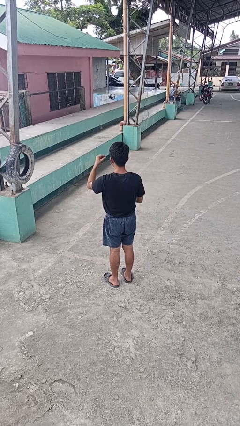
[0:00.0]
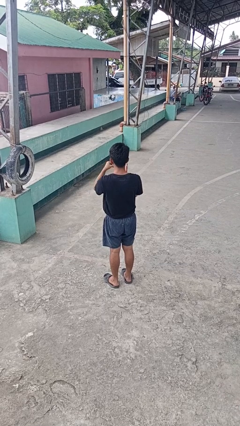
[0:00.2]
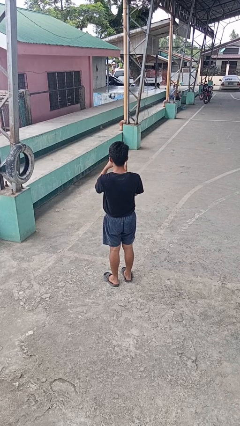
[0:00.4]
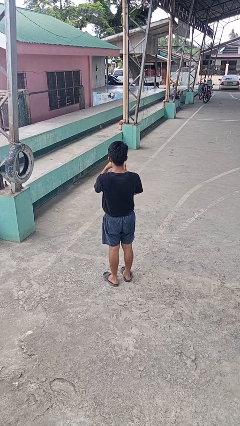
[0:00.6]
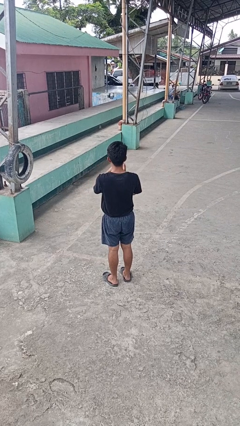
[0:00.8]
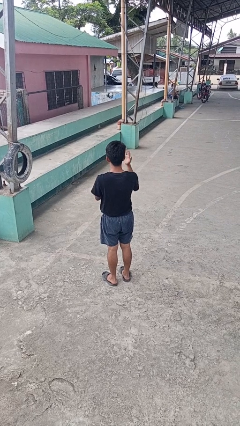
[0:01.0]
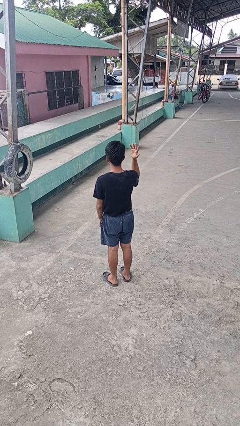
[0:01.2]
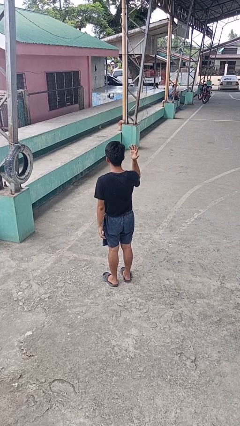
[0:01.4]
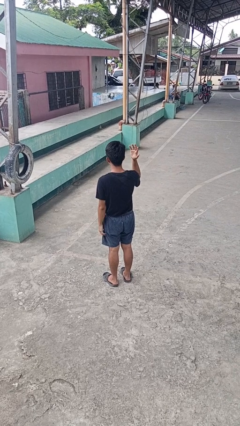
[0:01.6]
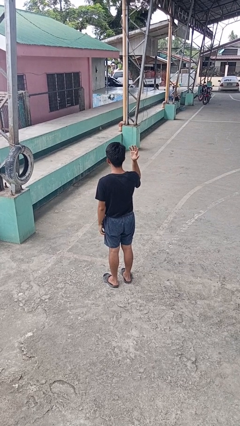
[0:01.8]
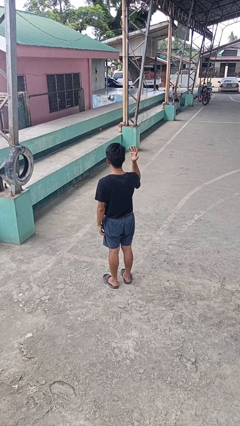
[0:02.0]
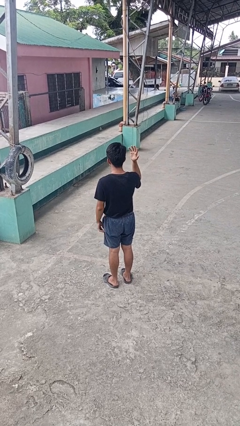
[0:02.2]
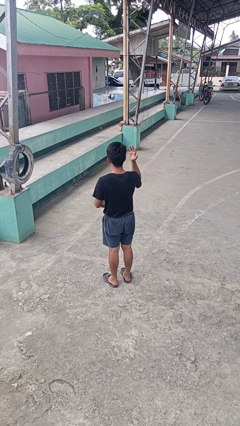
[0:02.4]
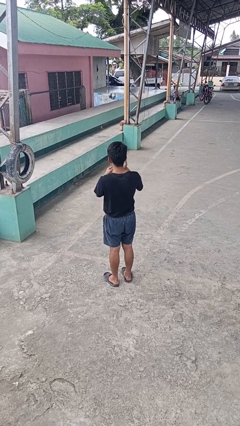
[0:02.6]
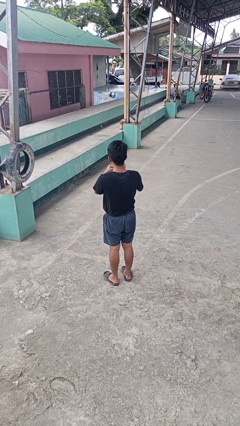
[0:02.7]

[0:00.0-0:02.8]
person puts on ring

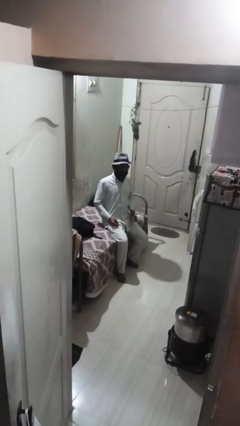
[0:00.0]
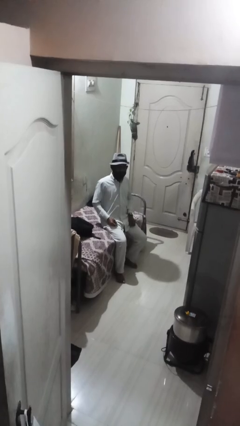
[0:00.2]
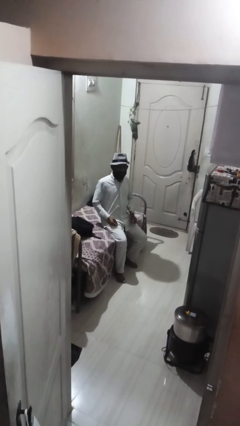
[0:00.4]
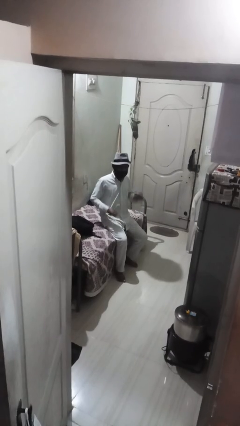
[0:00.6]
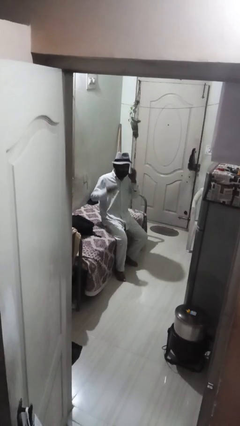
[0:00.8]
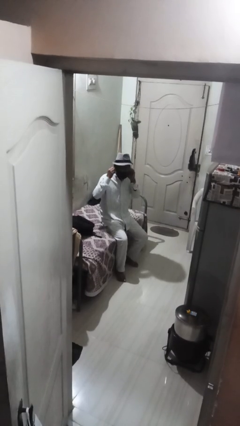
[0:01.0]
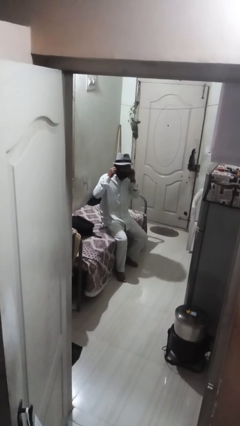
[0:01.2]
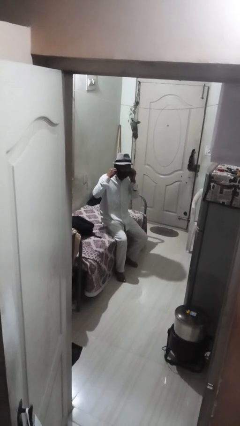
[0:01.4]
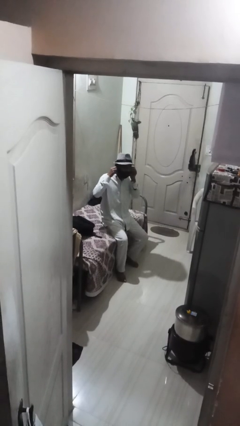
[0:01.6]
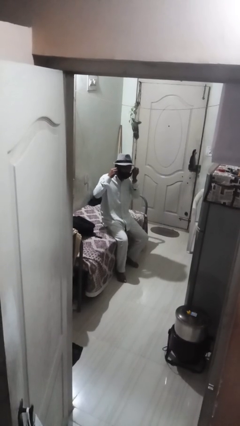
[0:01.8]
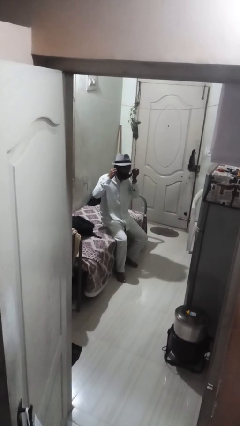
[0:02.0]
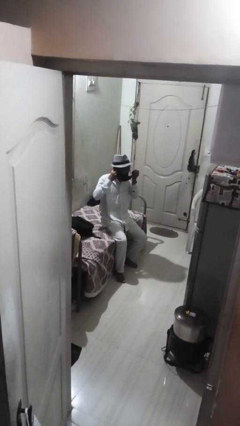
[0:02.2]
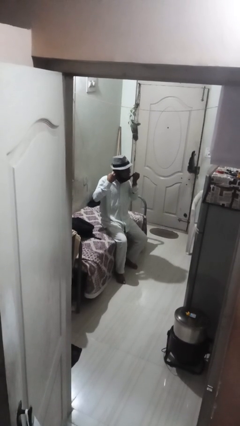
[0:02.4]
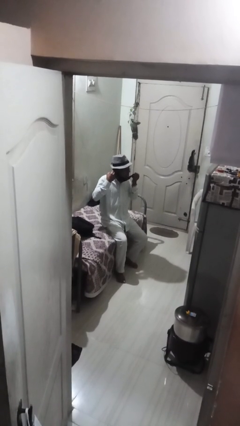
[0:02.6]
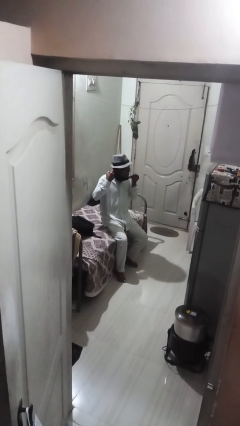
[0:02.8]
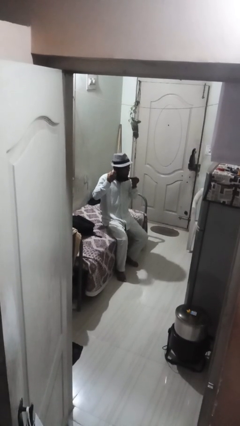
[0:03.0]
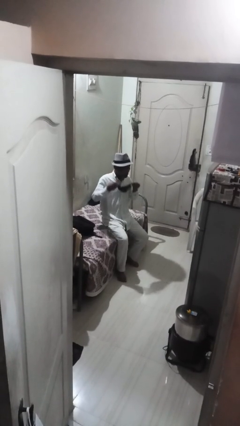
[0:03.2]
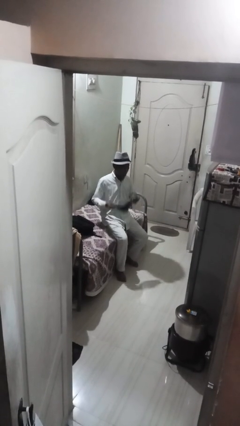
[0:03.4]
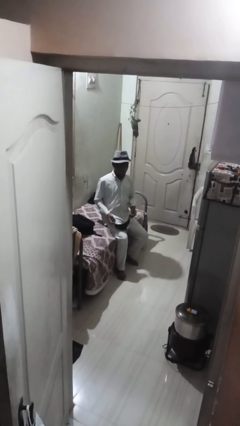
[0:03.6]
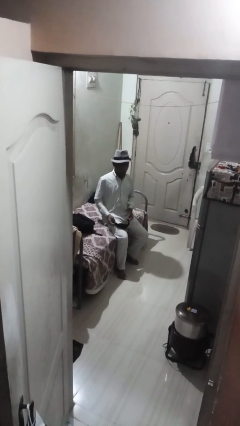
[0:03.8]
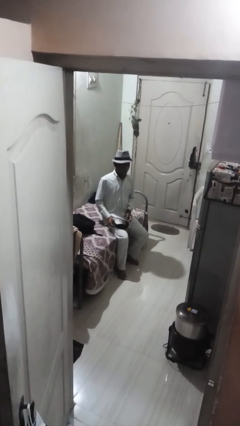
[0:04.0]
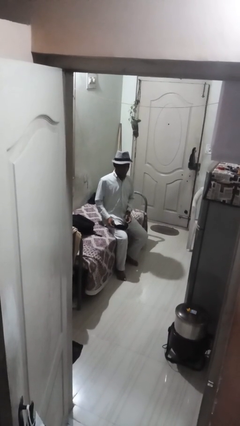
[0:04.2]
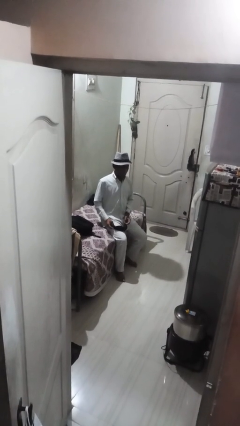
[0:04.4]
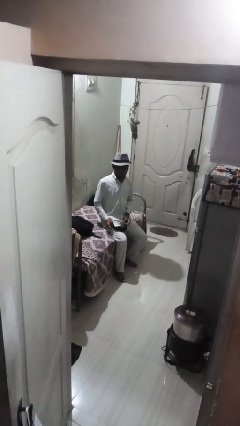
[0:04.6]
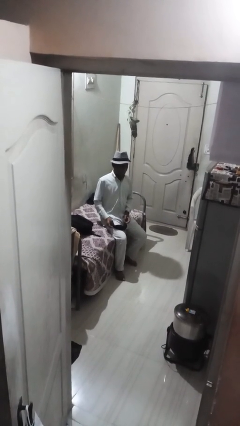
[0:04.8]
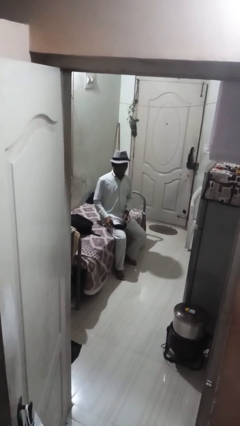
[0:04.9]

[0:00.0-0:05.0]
person takes off facemask

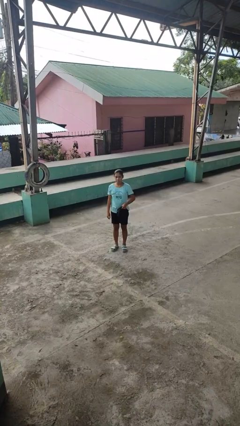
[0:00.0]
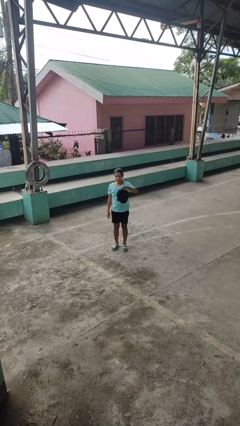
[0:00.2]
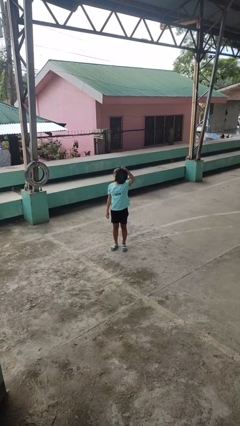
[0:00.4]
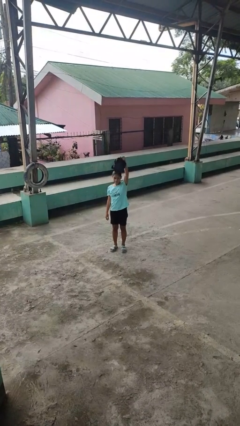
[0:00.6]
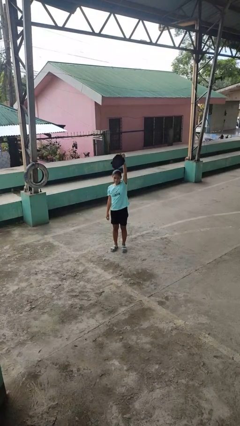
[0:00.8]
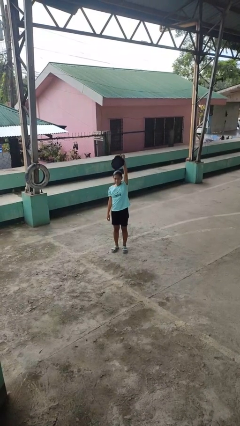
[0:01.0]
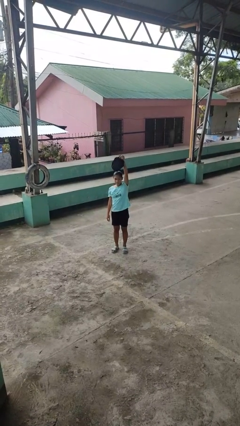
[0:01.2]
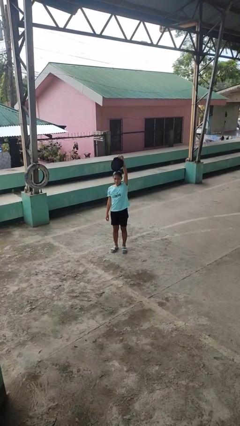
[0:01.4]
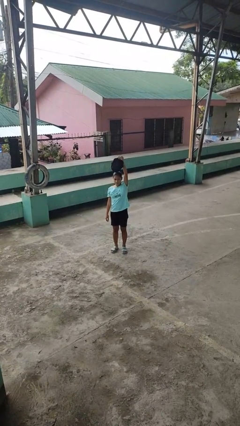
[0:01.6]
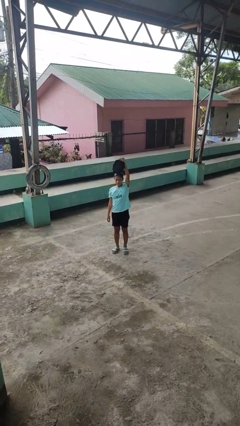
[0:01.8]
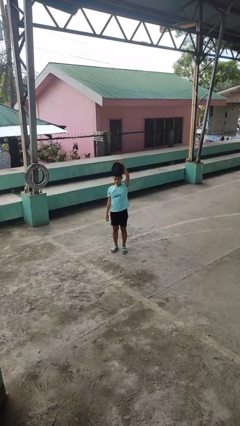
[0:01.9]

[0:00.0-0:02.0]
person holds object above head

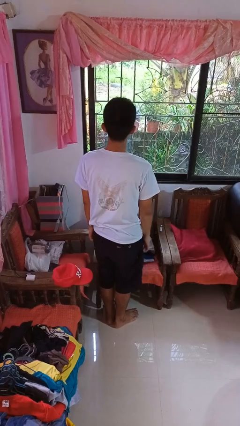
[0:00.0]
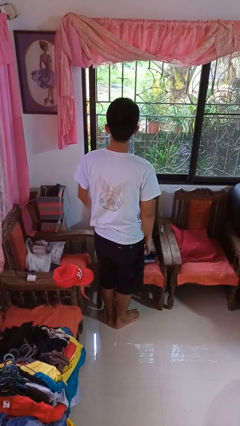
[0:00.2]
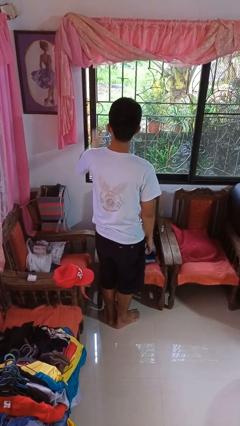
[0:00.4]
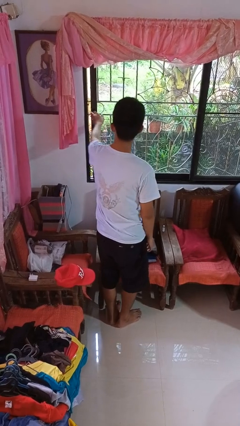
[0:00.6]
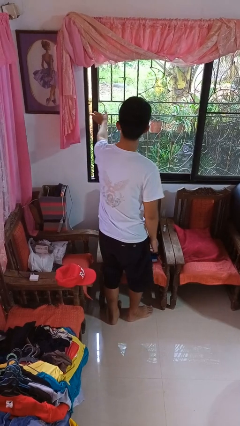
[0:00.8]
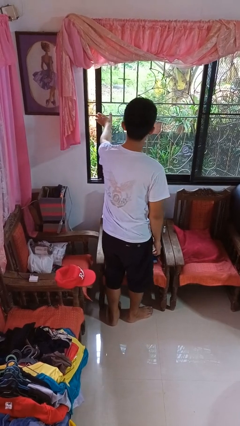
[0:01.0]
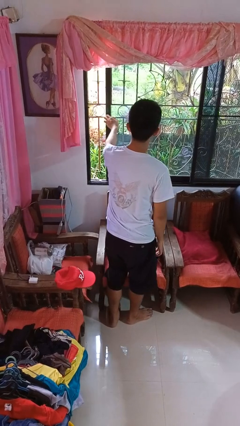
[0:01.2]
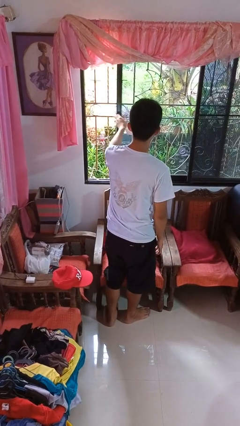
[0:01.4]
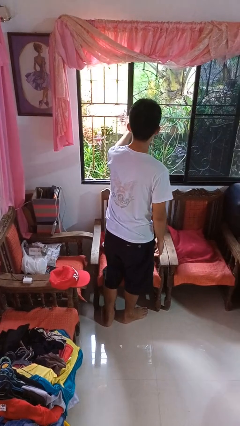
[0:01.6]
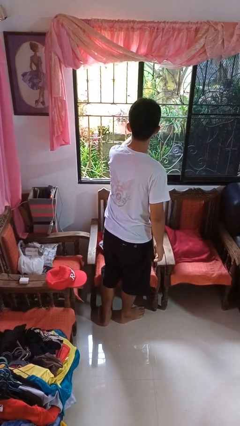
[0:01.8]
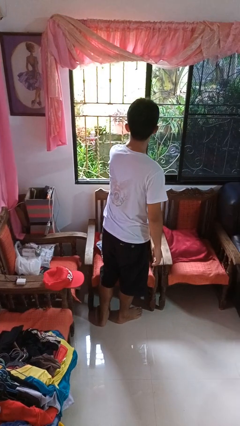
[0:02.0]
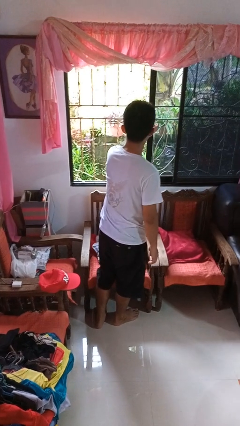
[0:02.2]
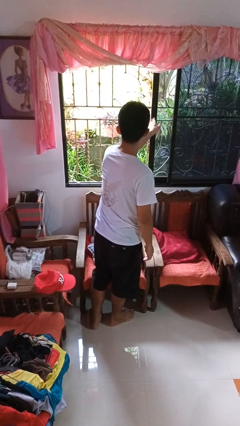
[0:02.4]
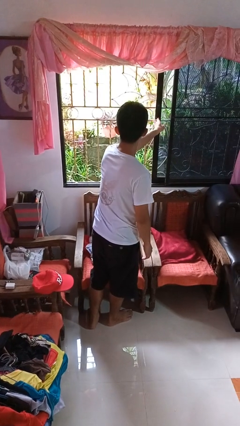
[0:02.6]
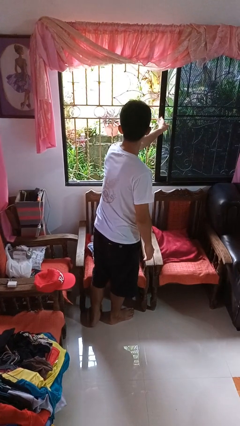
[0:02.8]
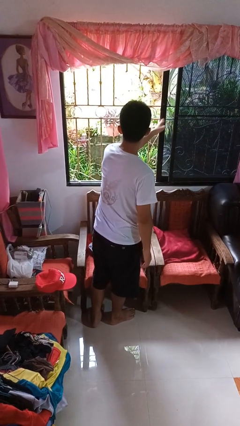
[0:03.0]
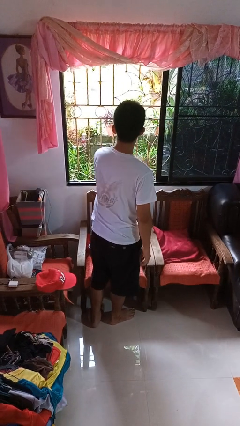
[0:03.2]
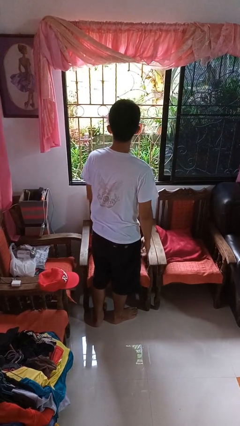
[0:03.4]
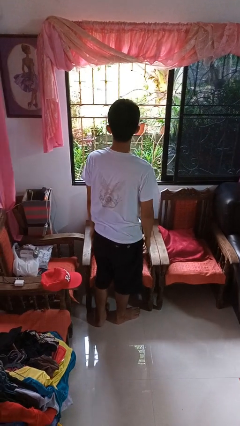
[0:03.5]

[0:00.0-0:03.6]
person opens home window

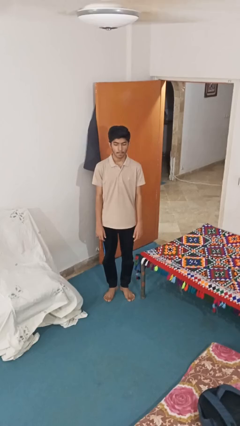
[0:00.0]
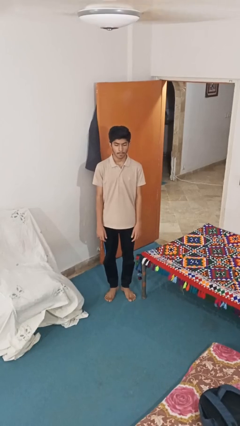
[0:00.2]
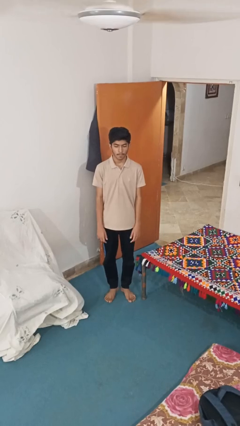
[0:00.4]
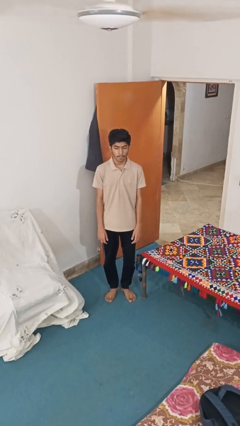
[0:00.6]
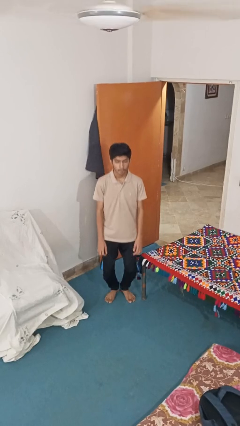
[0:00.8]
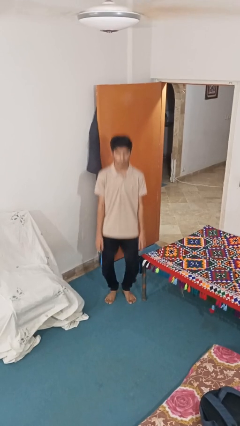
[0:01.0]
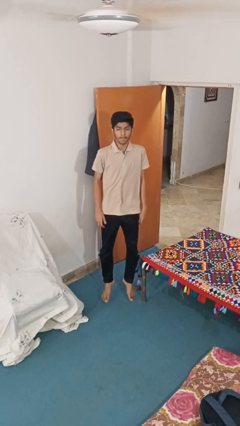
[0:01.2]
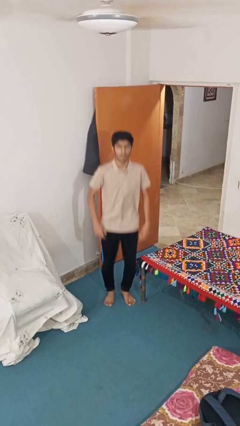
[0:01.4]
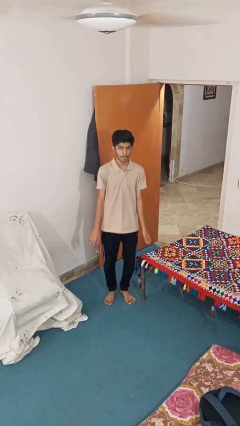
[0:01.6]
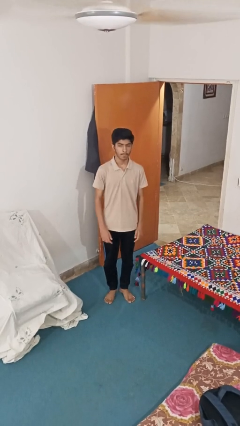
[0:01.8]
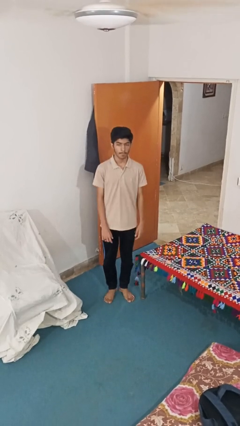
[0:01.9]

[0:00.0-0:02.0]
person jumps

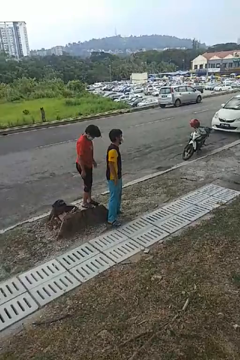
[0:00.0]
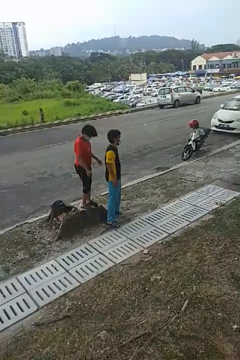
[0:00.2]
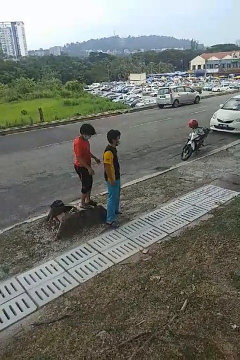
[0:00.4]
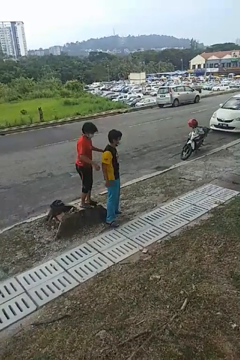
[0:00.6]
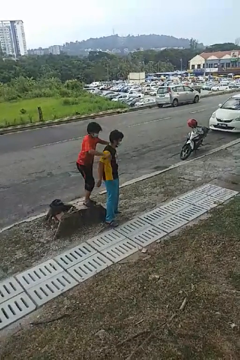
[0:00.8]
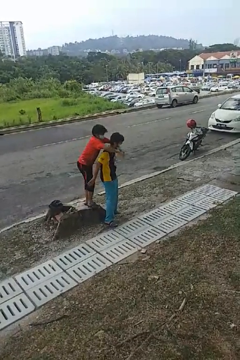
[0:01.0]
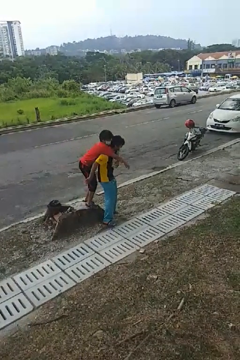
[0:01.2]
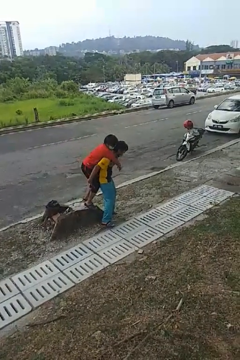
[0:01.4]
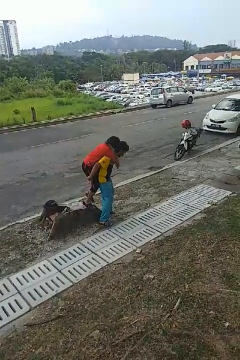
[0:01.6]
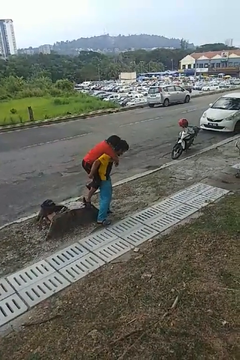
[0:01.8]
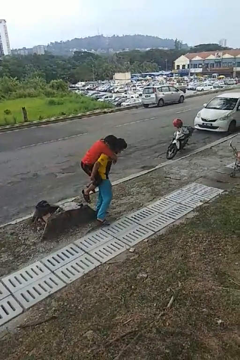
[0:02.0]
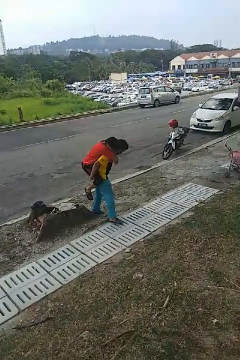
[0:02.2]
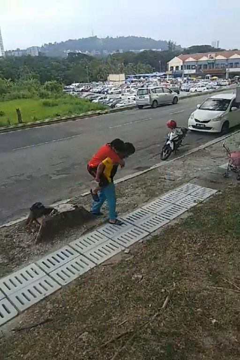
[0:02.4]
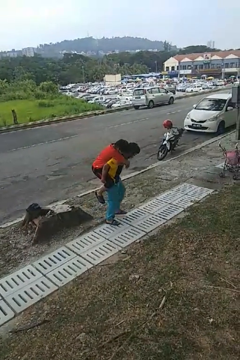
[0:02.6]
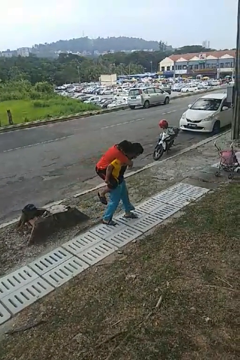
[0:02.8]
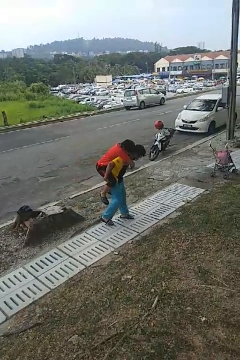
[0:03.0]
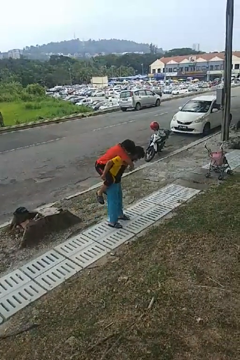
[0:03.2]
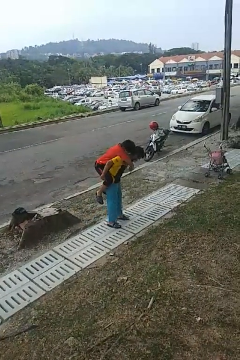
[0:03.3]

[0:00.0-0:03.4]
person carries person over shoulder
